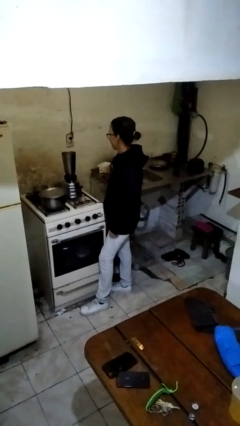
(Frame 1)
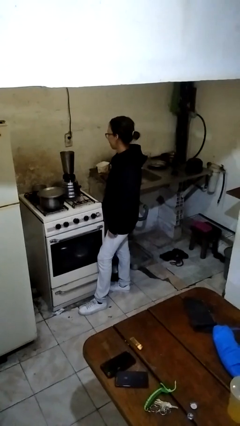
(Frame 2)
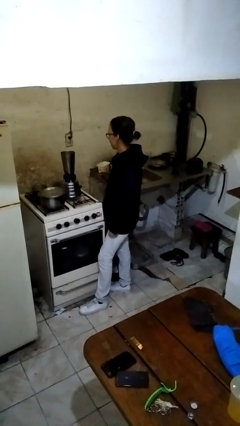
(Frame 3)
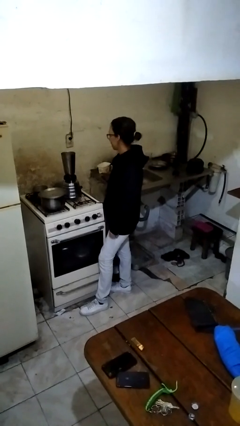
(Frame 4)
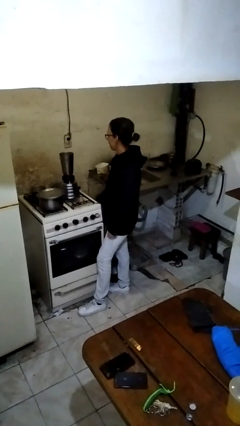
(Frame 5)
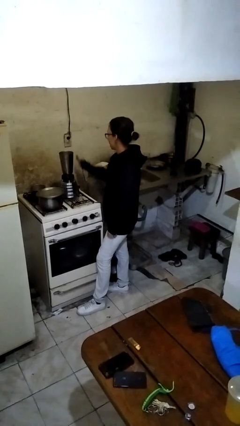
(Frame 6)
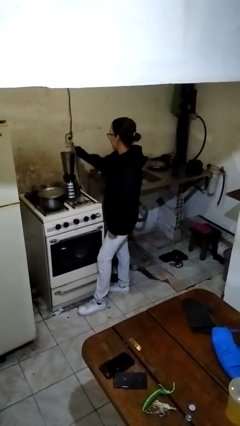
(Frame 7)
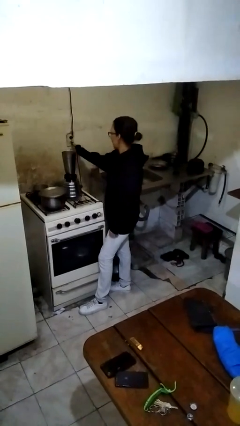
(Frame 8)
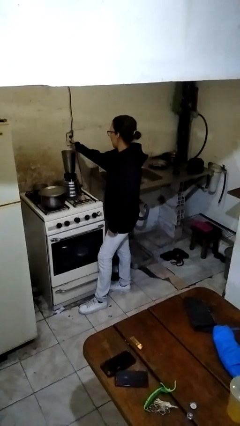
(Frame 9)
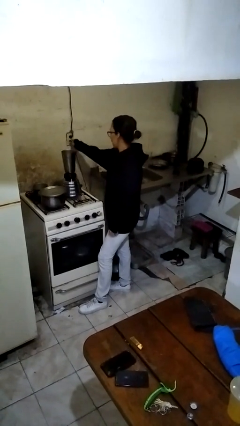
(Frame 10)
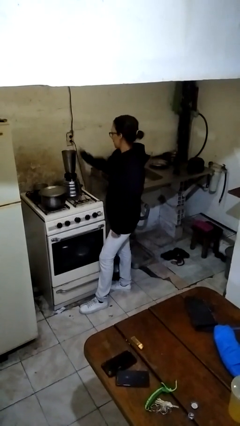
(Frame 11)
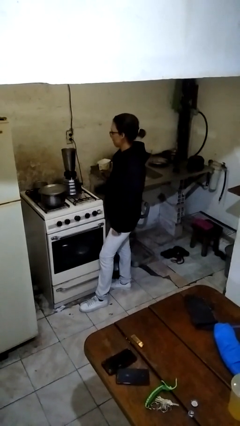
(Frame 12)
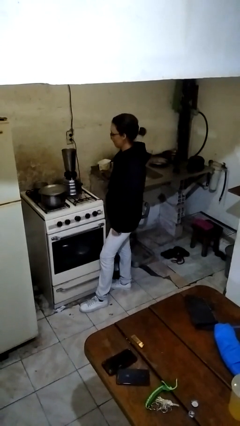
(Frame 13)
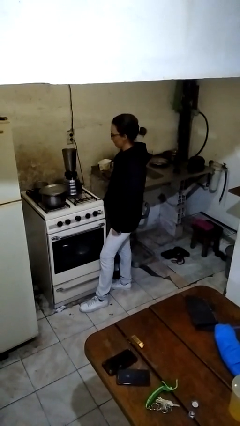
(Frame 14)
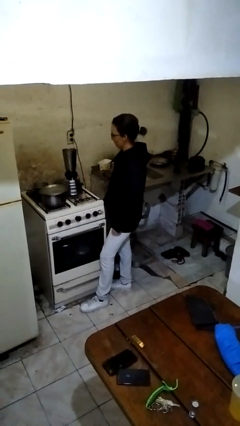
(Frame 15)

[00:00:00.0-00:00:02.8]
person plugs into electrical socket

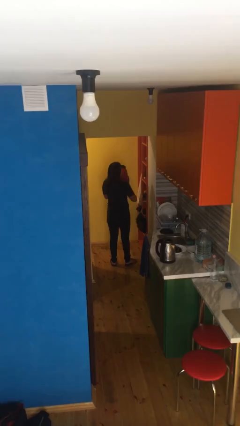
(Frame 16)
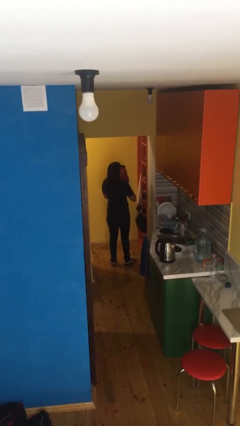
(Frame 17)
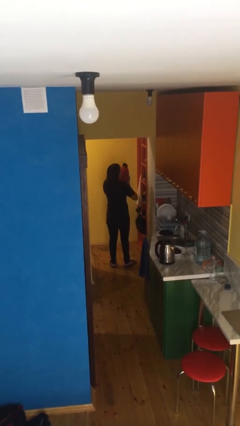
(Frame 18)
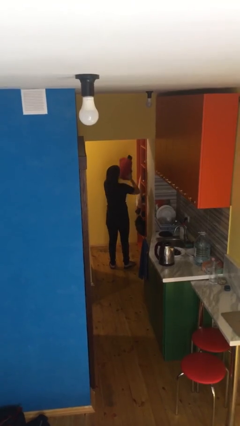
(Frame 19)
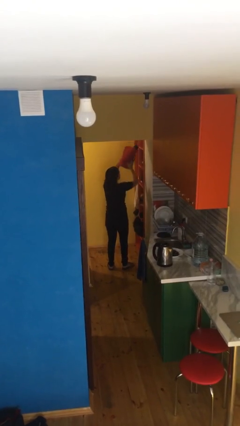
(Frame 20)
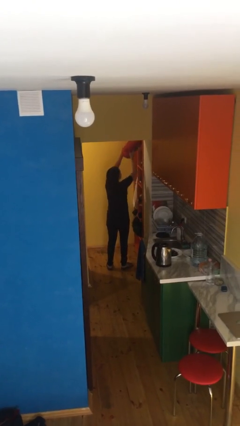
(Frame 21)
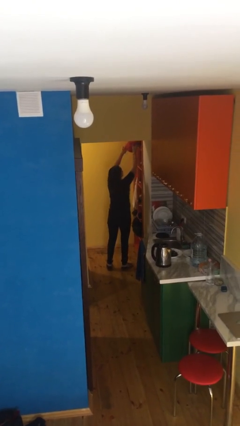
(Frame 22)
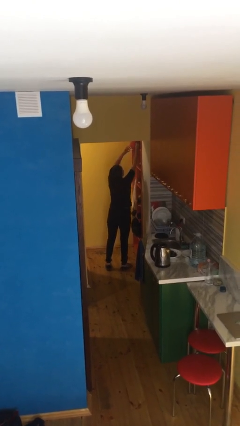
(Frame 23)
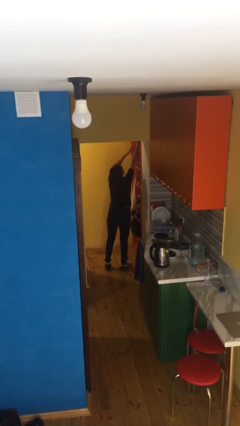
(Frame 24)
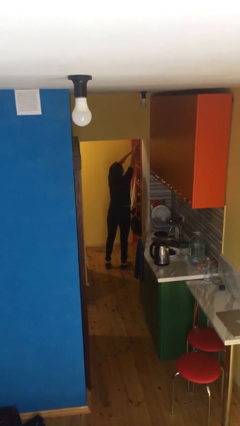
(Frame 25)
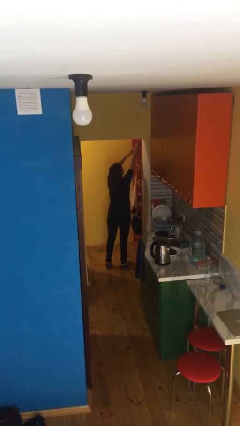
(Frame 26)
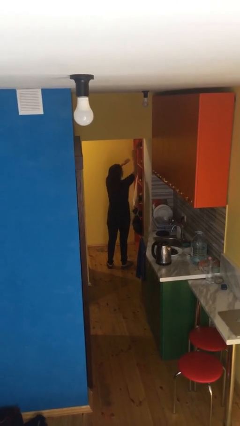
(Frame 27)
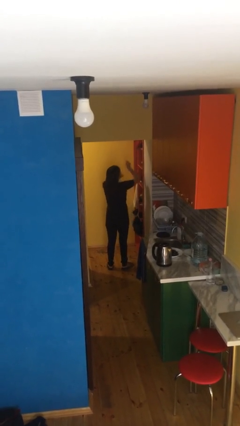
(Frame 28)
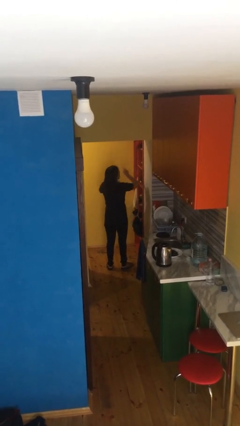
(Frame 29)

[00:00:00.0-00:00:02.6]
person puts down object on shelf

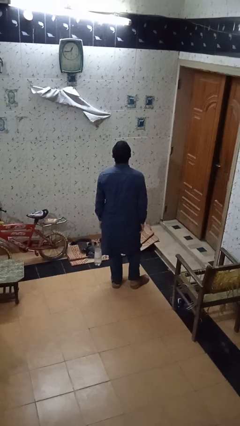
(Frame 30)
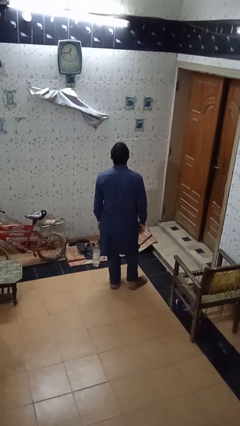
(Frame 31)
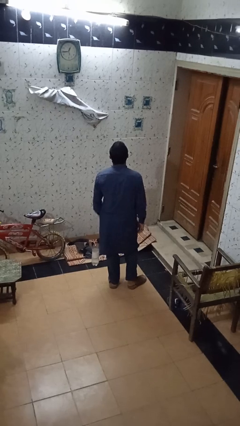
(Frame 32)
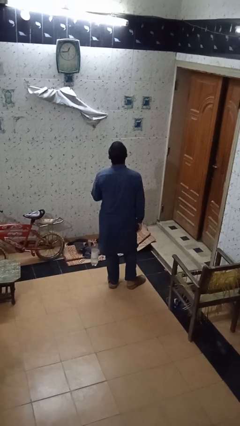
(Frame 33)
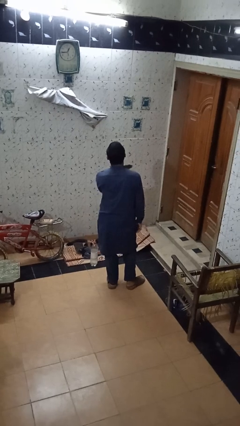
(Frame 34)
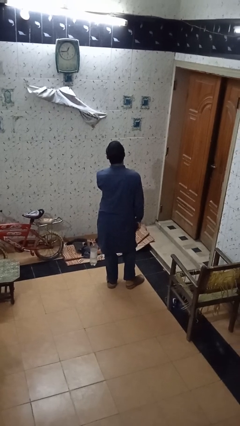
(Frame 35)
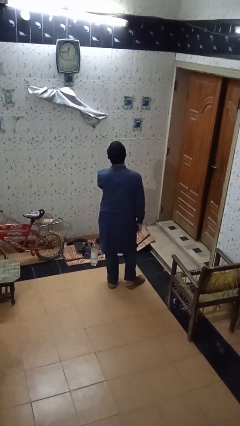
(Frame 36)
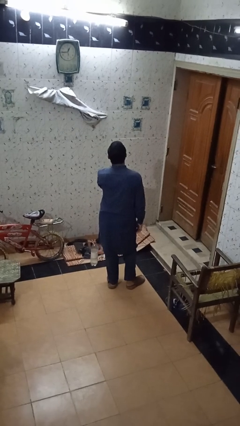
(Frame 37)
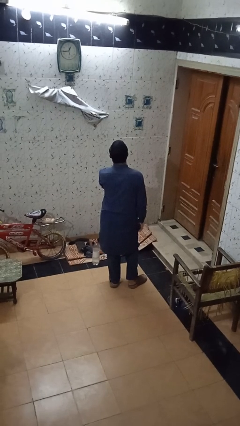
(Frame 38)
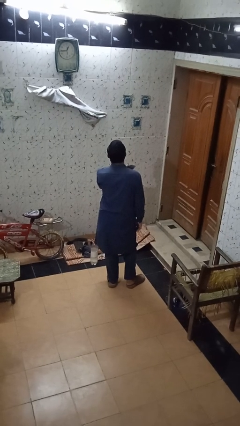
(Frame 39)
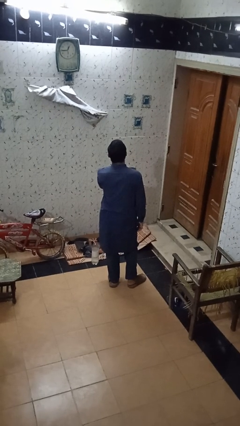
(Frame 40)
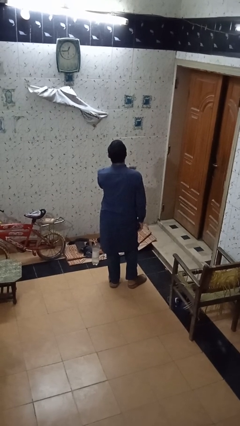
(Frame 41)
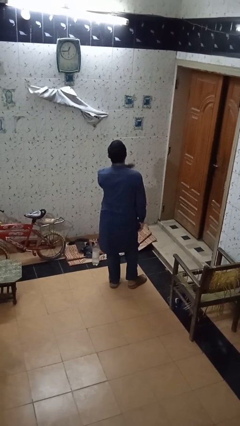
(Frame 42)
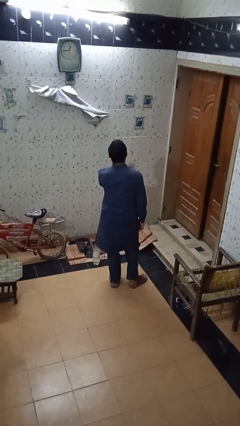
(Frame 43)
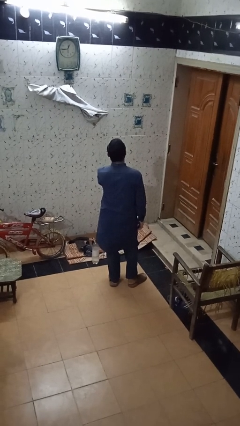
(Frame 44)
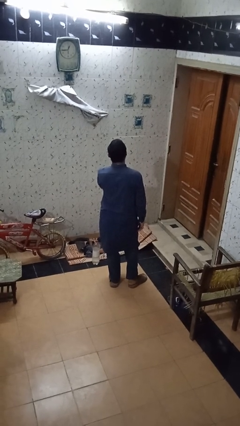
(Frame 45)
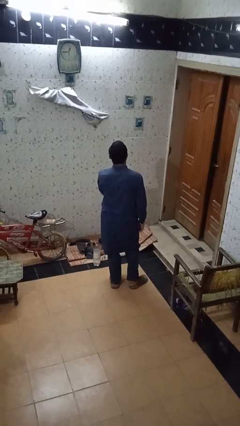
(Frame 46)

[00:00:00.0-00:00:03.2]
person drums on chest

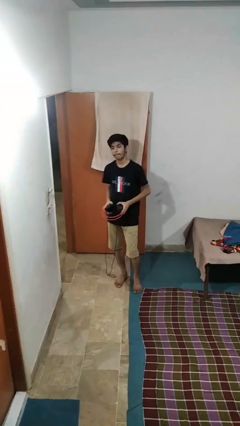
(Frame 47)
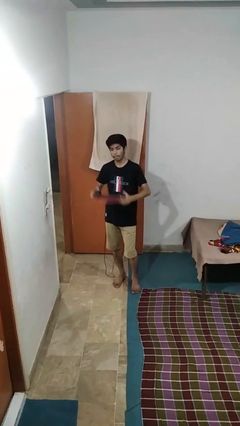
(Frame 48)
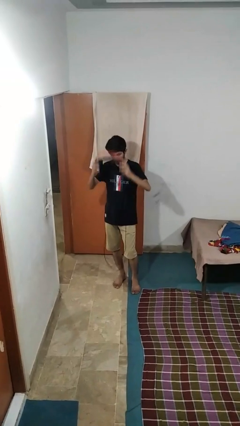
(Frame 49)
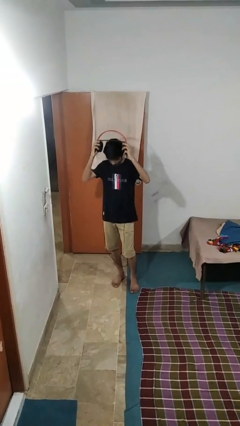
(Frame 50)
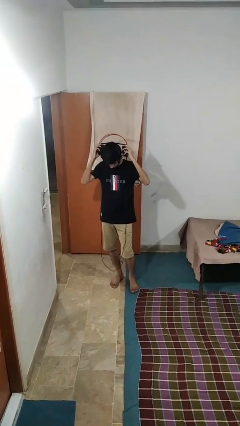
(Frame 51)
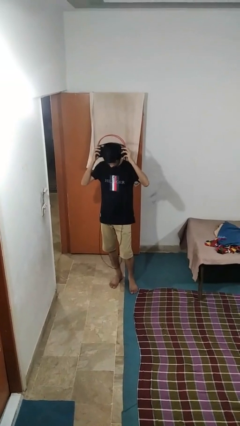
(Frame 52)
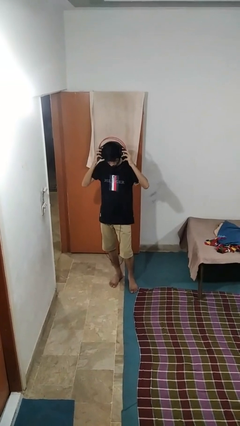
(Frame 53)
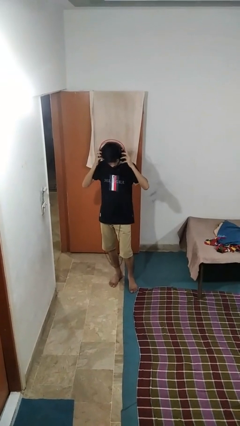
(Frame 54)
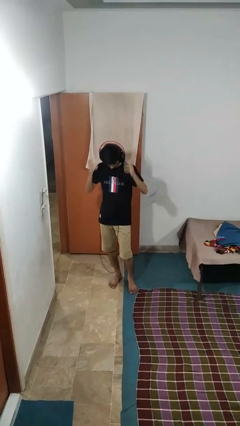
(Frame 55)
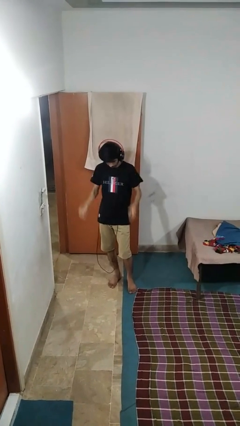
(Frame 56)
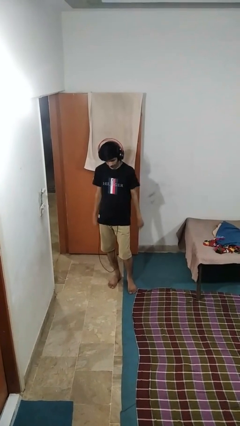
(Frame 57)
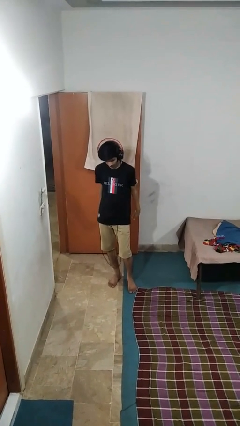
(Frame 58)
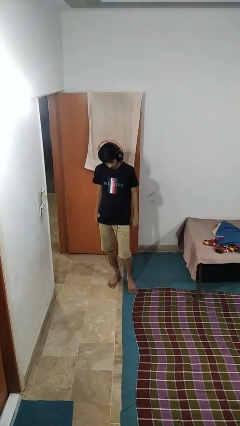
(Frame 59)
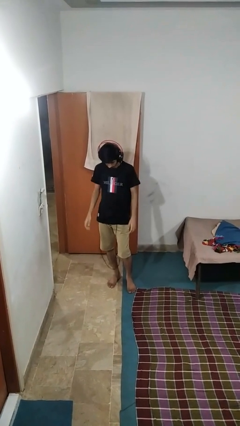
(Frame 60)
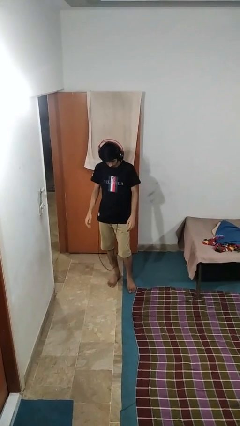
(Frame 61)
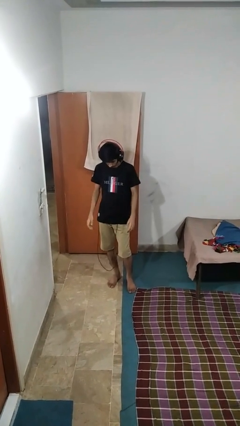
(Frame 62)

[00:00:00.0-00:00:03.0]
person puts on headphones

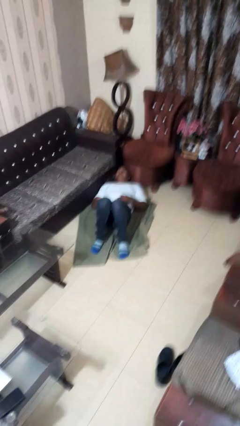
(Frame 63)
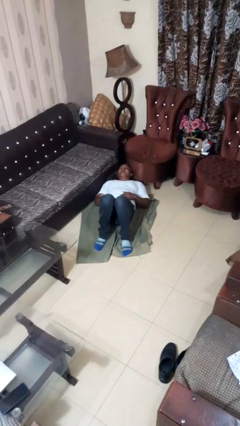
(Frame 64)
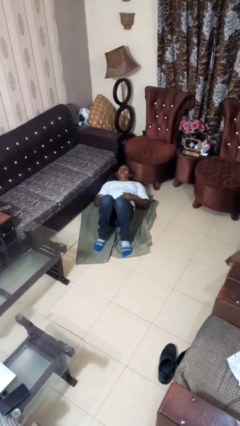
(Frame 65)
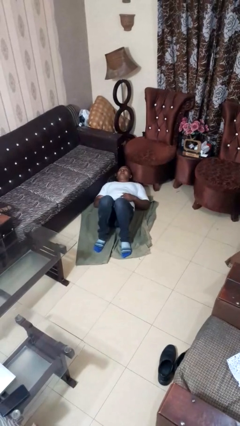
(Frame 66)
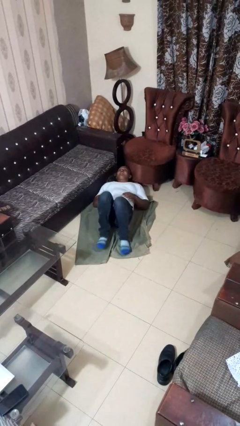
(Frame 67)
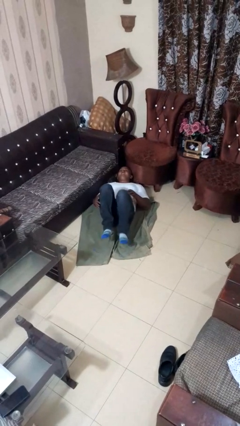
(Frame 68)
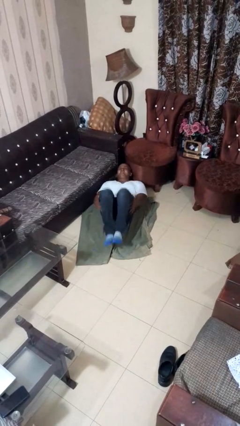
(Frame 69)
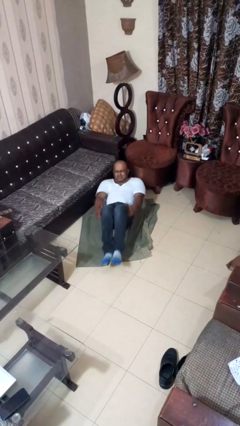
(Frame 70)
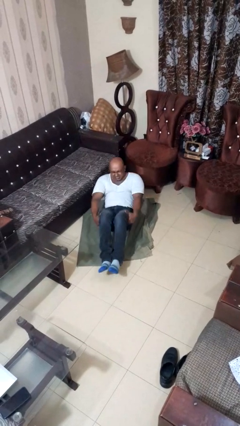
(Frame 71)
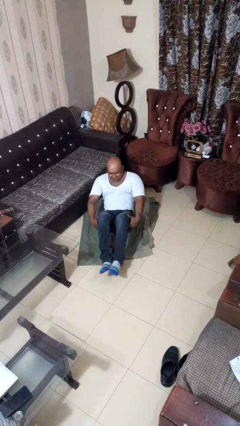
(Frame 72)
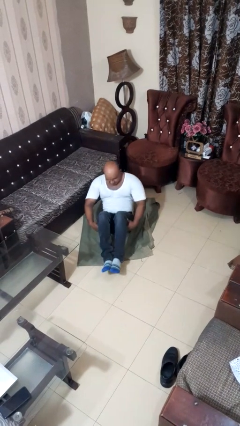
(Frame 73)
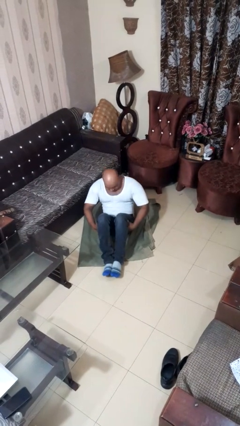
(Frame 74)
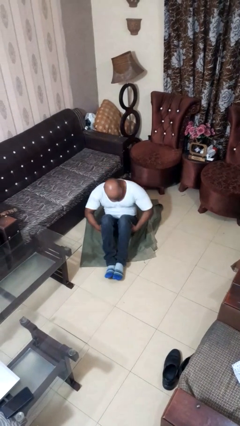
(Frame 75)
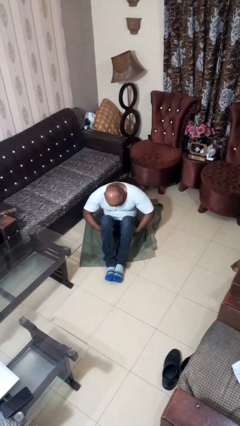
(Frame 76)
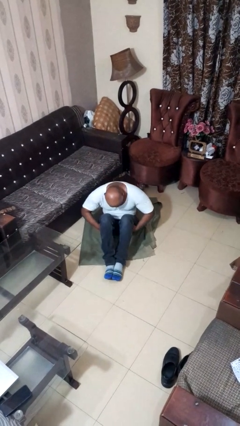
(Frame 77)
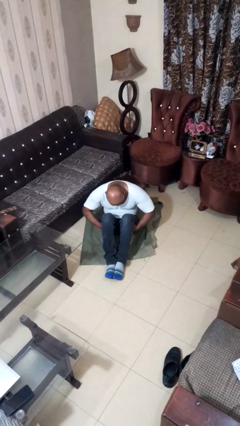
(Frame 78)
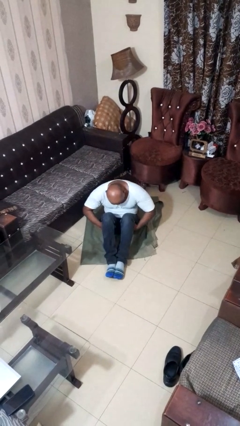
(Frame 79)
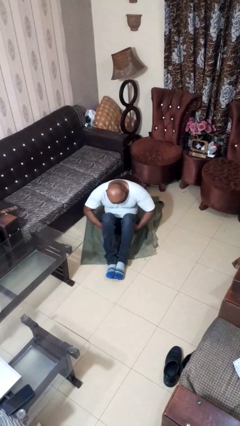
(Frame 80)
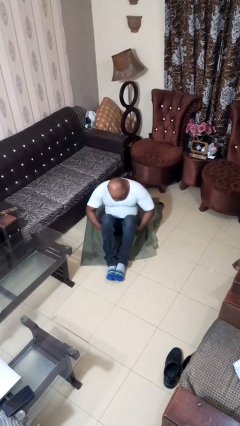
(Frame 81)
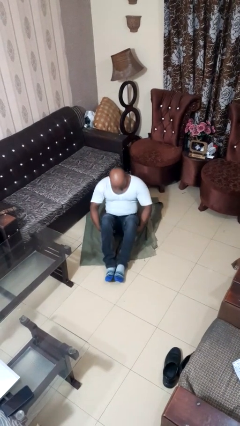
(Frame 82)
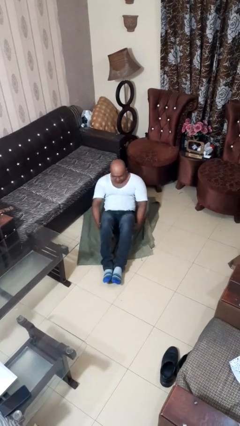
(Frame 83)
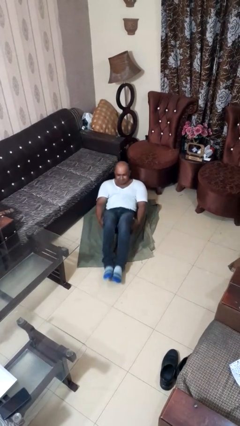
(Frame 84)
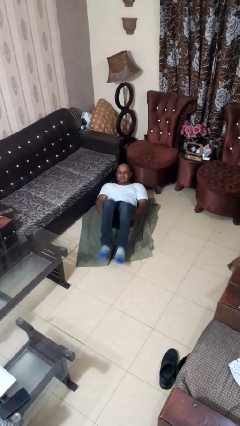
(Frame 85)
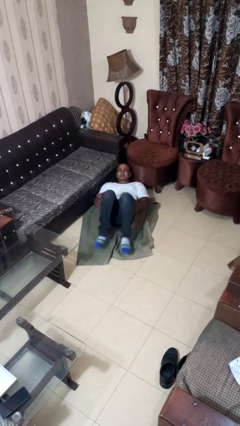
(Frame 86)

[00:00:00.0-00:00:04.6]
person exercises with situp

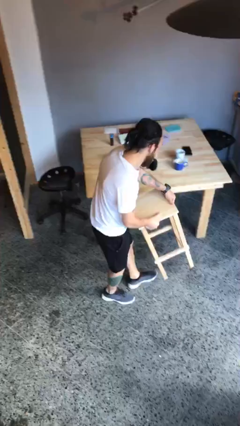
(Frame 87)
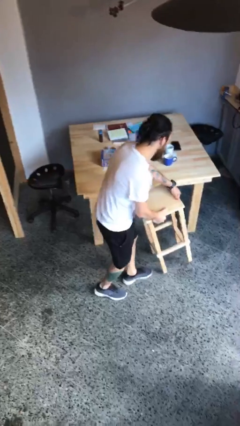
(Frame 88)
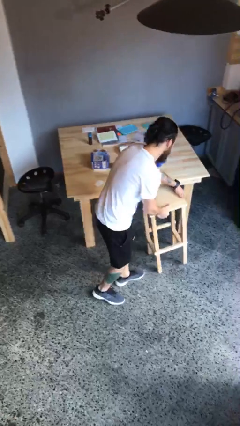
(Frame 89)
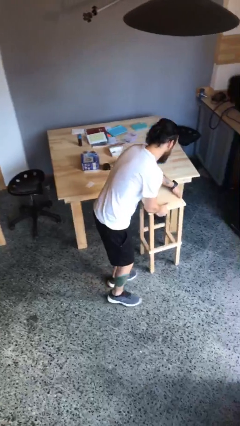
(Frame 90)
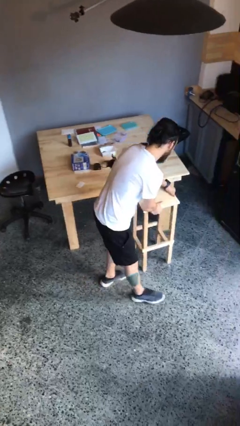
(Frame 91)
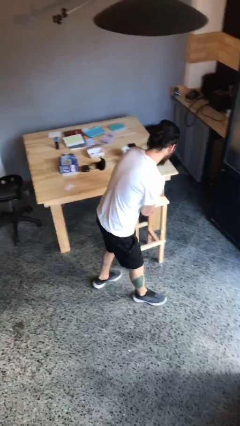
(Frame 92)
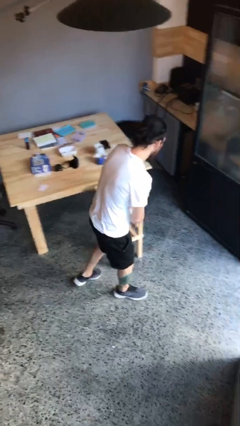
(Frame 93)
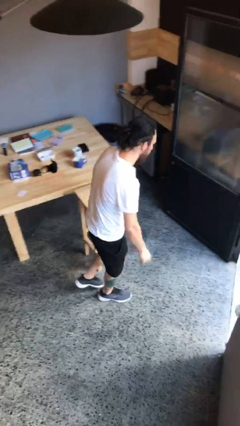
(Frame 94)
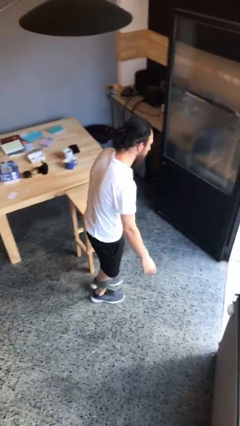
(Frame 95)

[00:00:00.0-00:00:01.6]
person puts down object on floor
